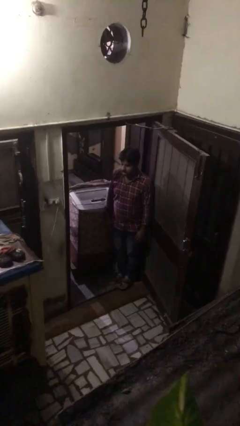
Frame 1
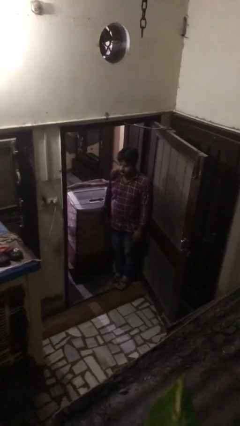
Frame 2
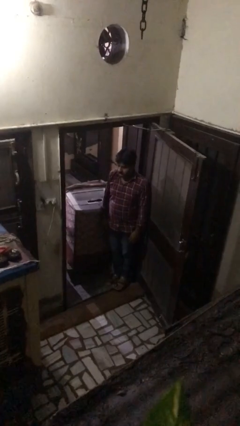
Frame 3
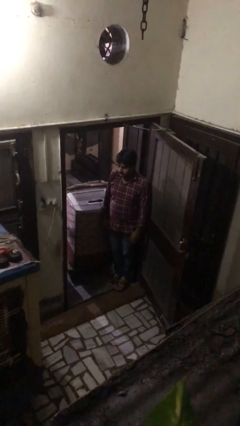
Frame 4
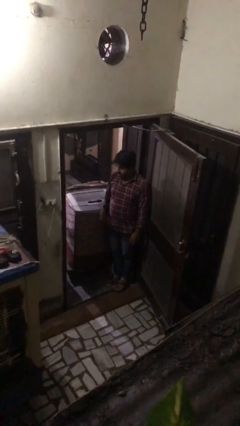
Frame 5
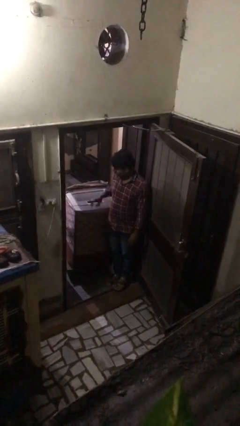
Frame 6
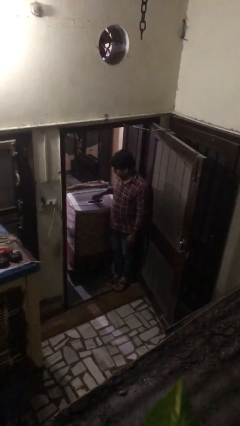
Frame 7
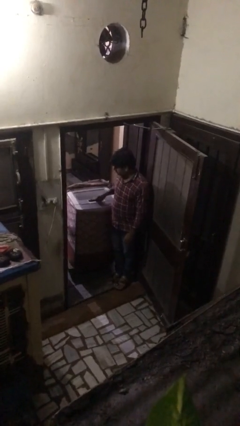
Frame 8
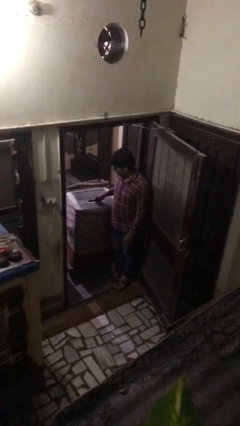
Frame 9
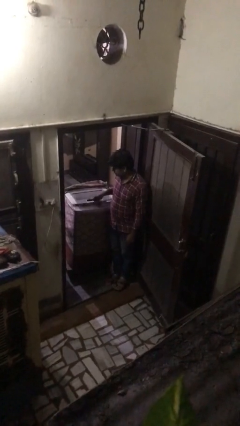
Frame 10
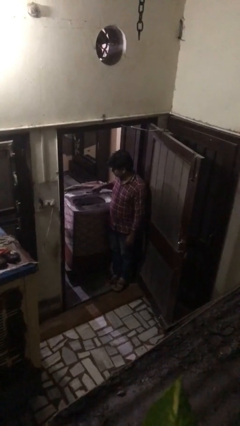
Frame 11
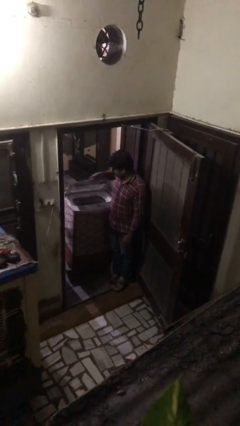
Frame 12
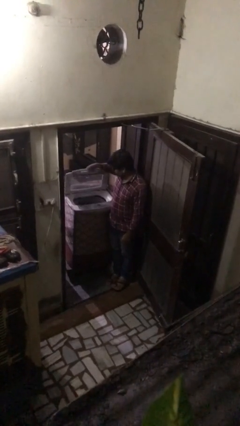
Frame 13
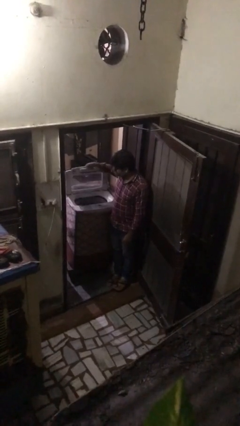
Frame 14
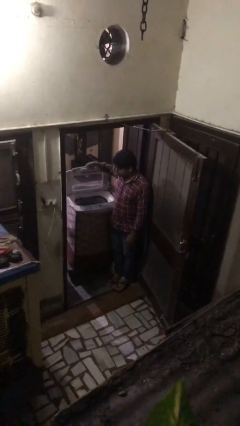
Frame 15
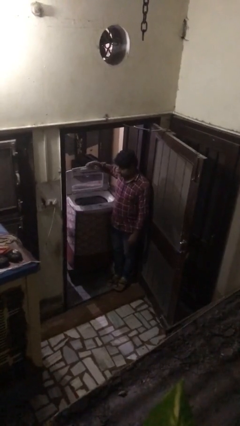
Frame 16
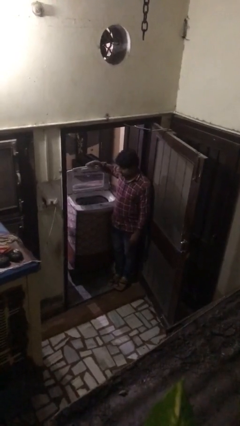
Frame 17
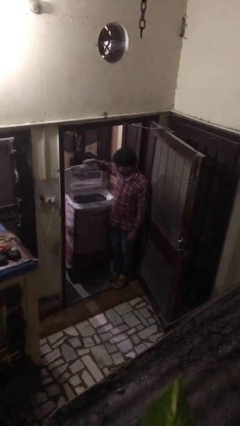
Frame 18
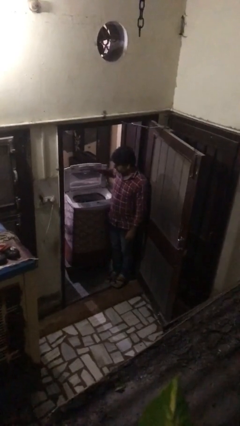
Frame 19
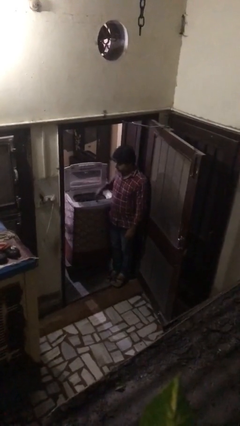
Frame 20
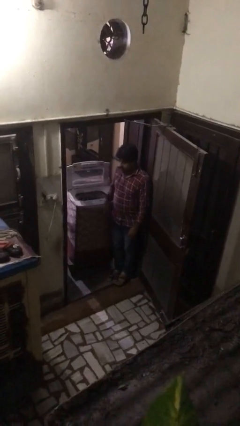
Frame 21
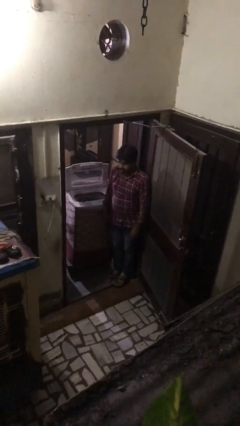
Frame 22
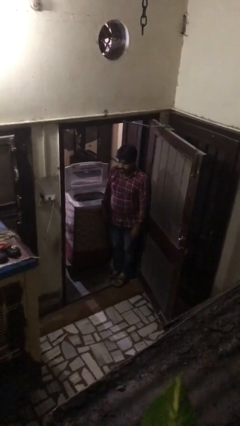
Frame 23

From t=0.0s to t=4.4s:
person opens clothes washer

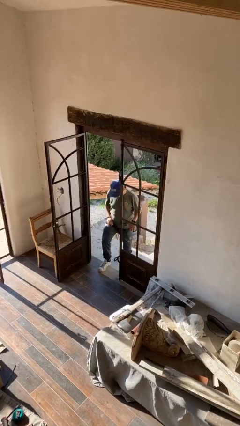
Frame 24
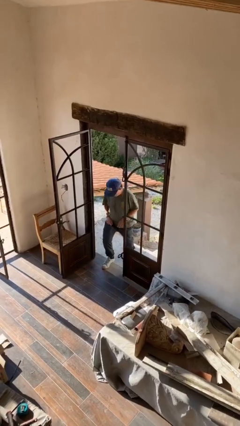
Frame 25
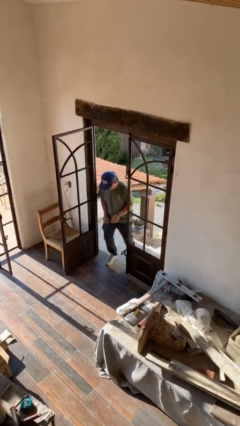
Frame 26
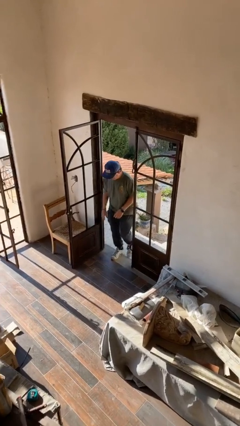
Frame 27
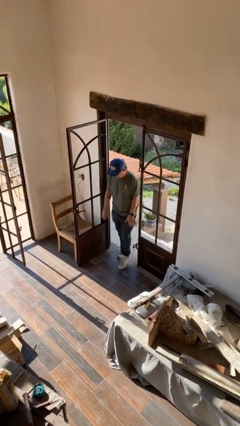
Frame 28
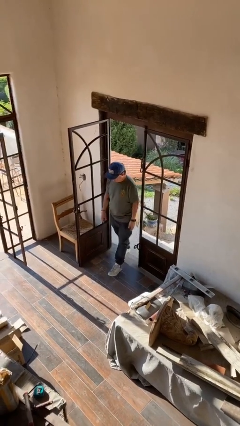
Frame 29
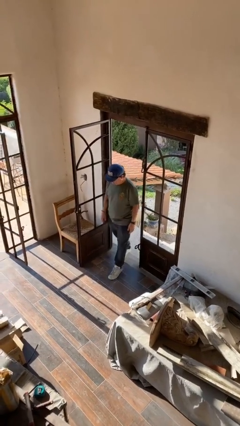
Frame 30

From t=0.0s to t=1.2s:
person enters scene through structure

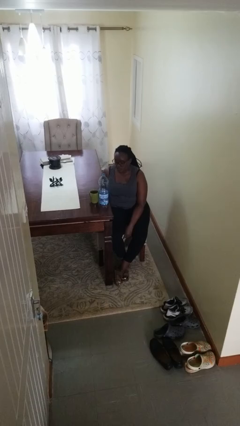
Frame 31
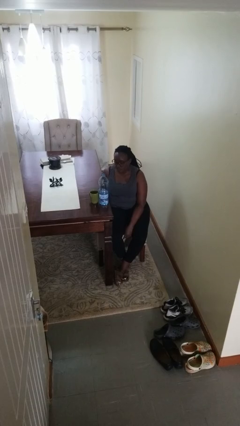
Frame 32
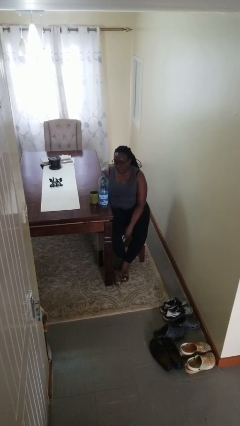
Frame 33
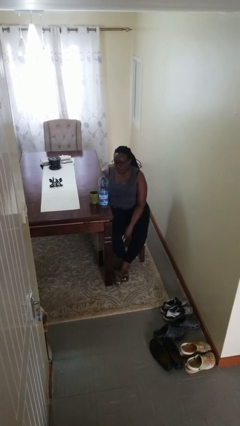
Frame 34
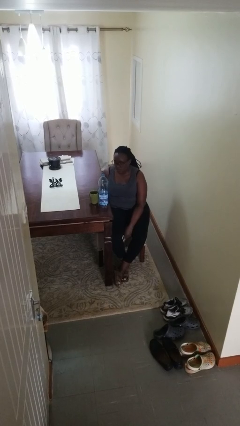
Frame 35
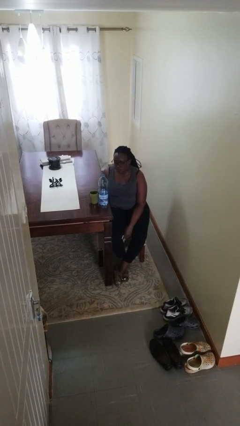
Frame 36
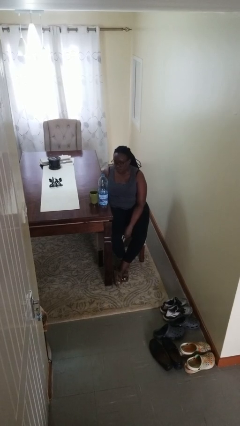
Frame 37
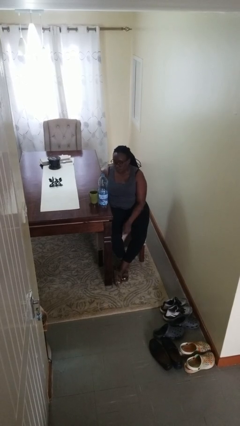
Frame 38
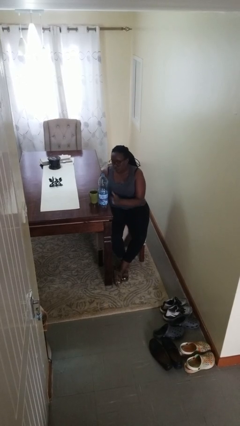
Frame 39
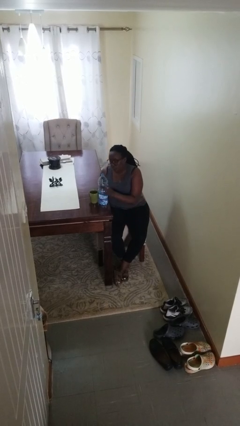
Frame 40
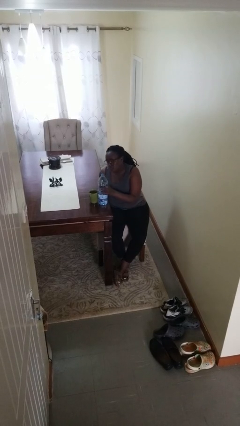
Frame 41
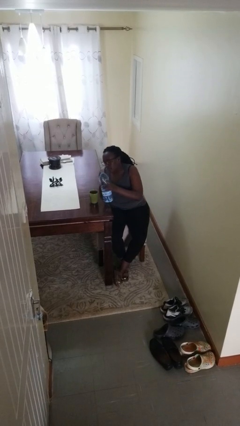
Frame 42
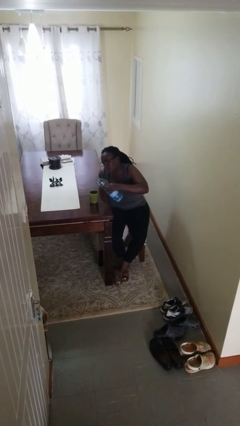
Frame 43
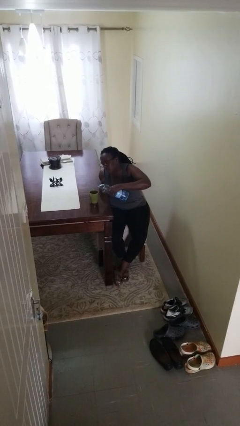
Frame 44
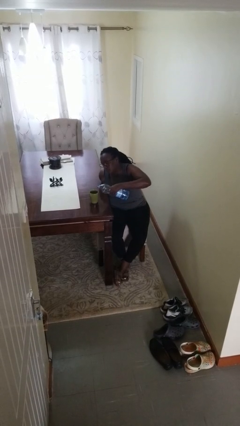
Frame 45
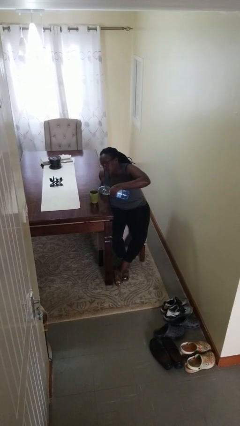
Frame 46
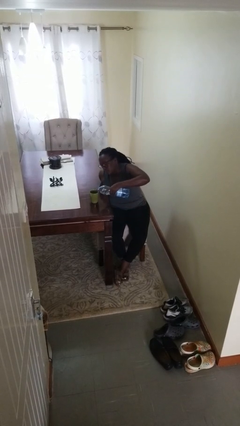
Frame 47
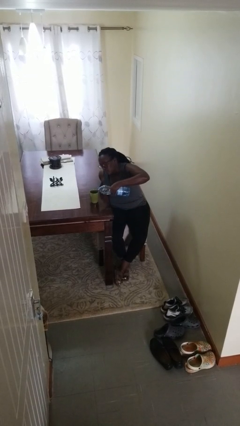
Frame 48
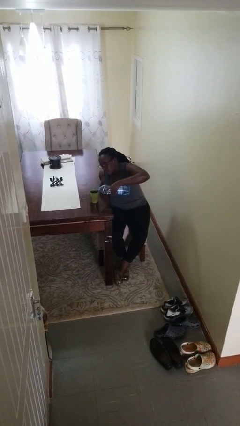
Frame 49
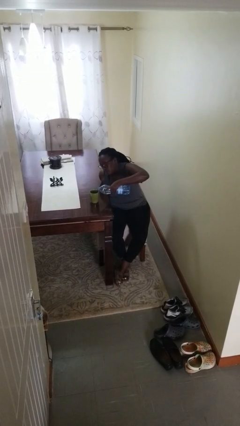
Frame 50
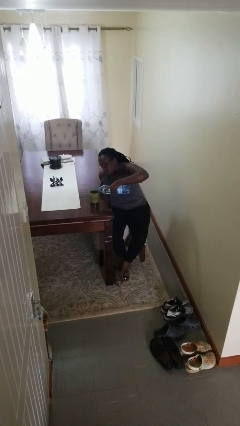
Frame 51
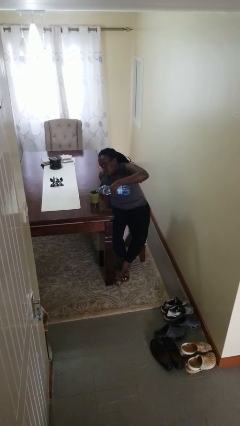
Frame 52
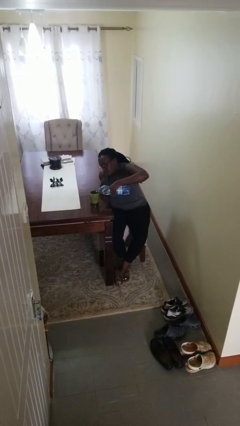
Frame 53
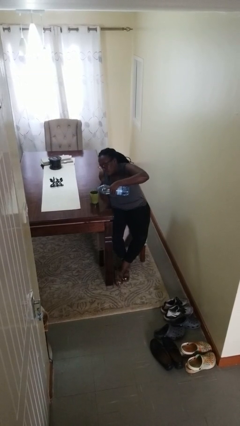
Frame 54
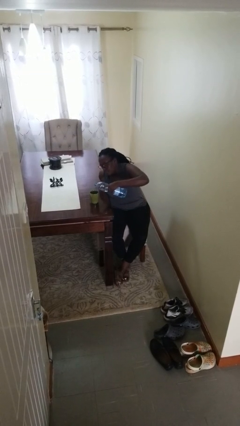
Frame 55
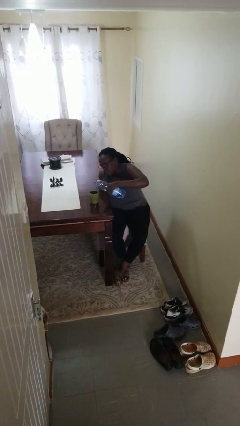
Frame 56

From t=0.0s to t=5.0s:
person pours liquid into cup

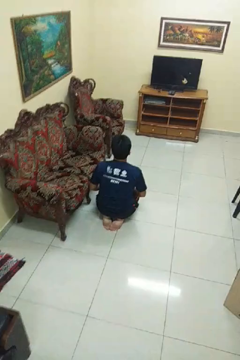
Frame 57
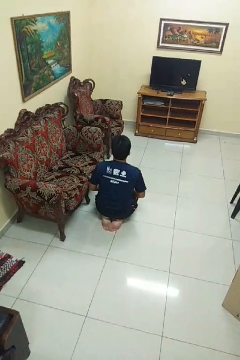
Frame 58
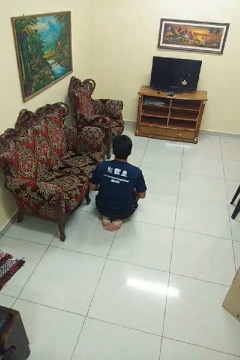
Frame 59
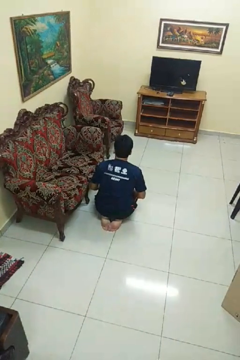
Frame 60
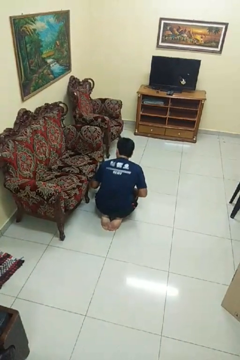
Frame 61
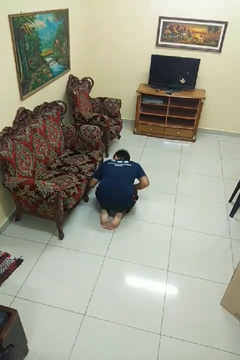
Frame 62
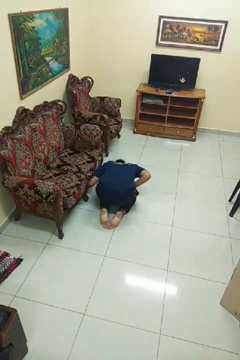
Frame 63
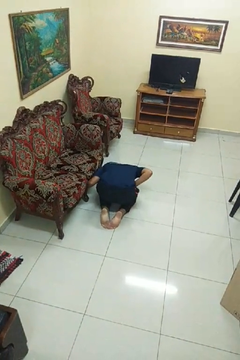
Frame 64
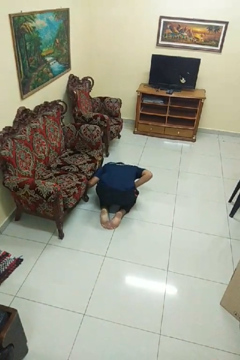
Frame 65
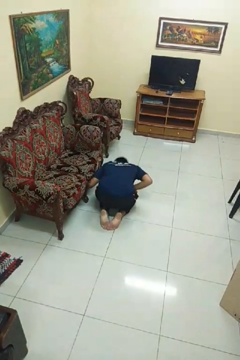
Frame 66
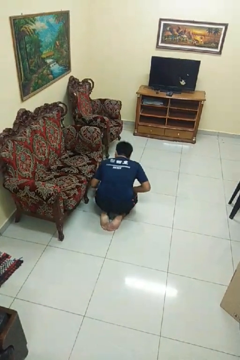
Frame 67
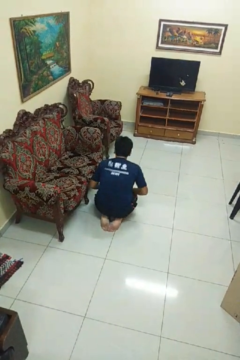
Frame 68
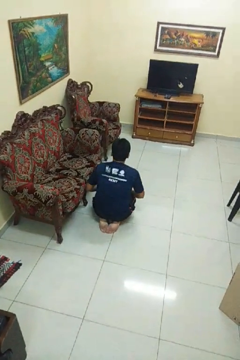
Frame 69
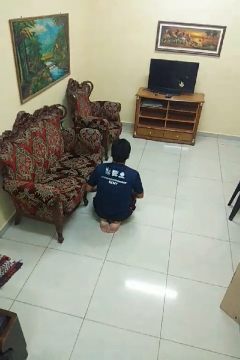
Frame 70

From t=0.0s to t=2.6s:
person searches under couch

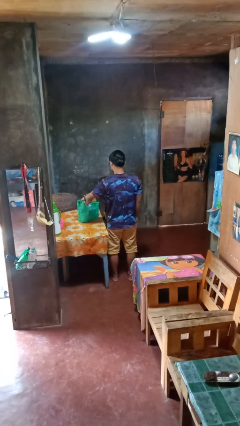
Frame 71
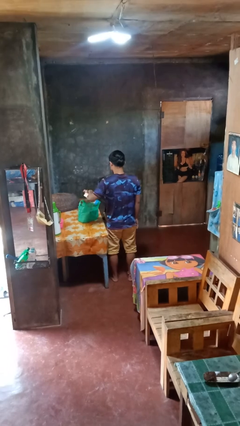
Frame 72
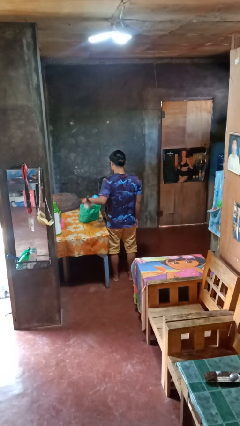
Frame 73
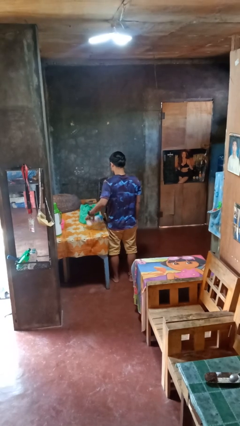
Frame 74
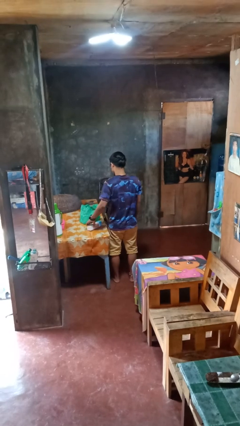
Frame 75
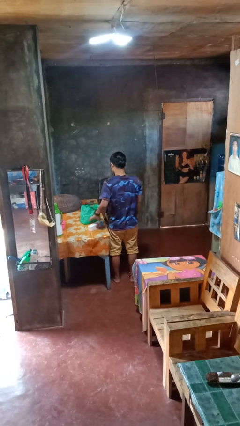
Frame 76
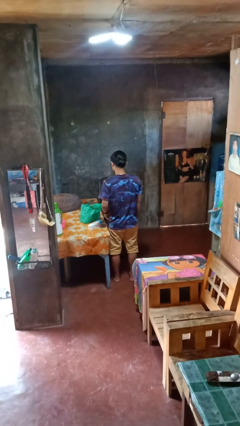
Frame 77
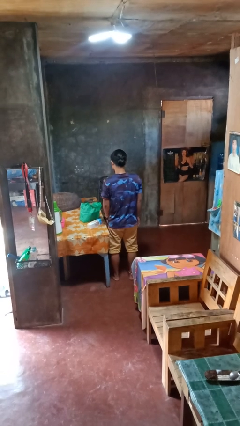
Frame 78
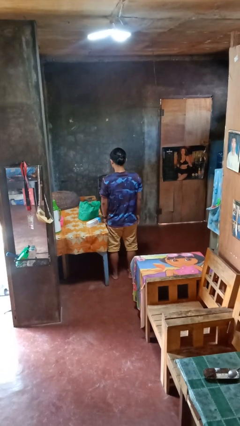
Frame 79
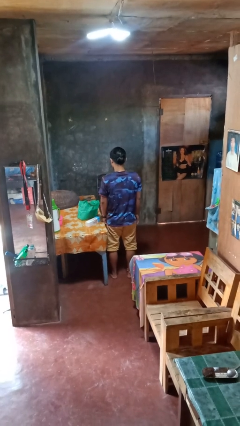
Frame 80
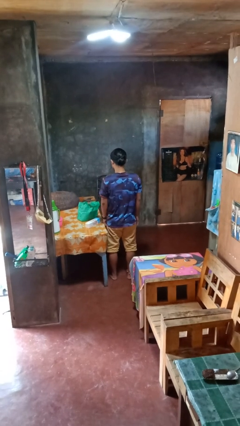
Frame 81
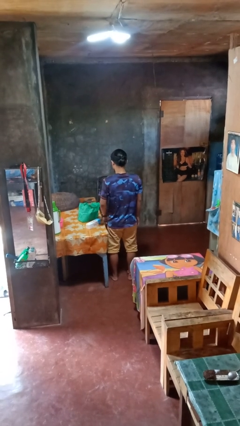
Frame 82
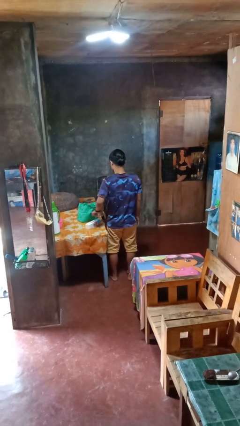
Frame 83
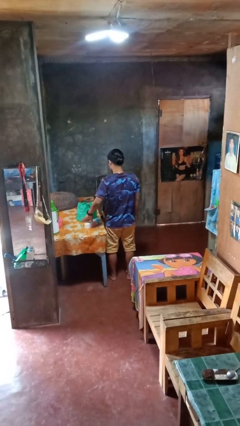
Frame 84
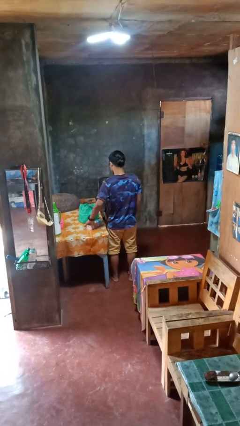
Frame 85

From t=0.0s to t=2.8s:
person takes object from bag

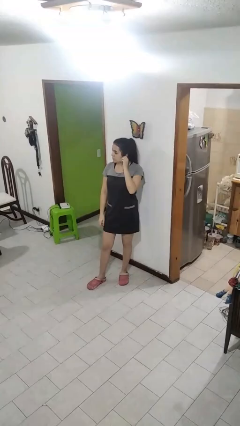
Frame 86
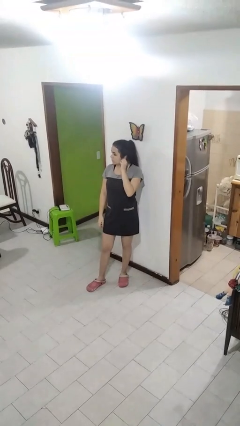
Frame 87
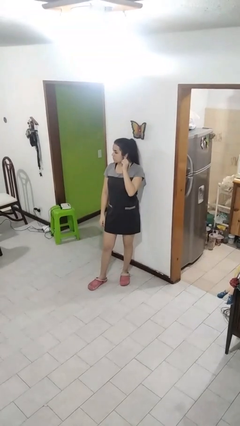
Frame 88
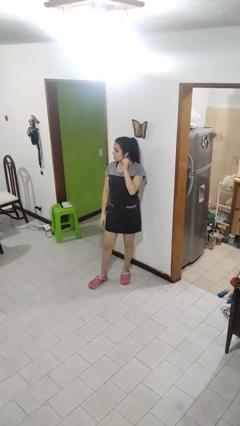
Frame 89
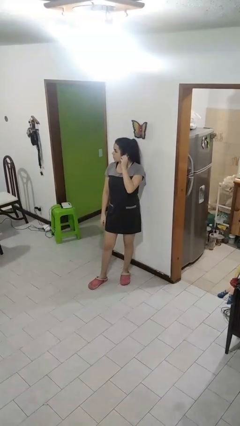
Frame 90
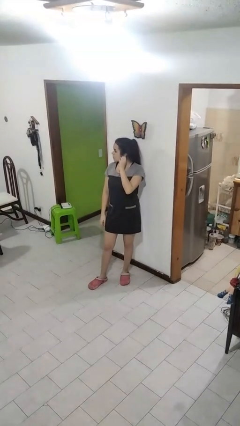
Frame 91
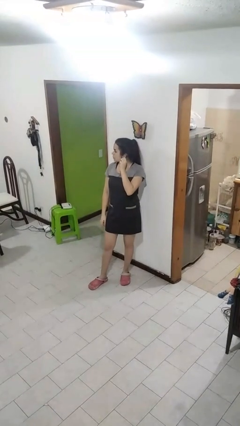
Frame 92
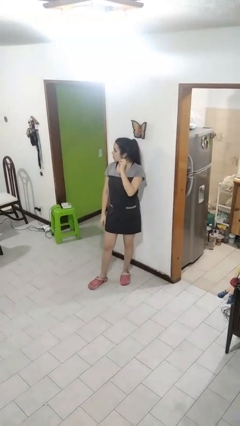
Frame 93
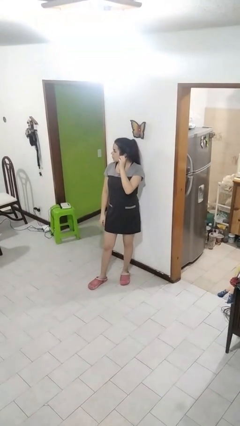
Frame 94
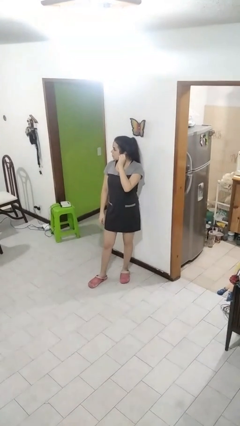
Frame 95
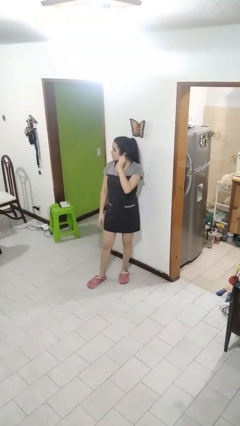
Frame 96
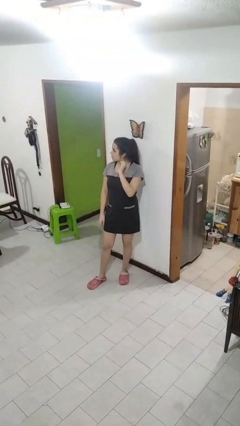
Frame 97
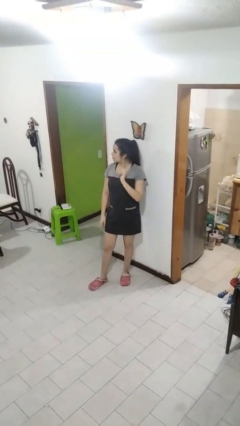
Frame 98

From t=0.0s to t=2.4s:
person touches earlobe
